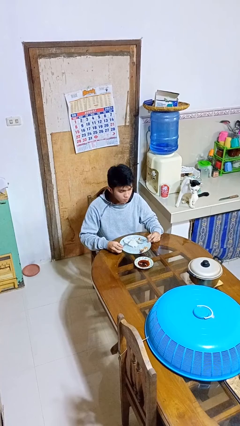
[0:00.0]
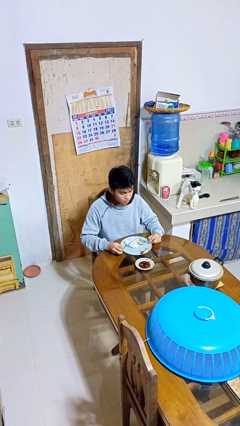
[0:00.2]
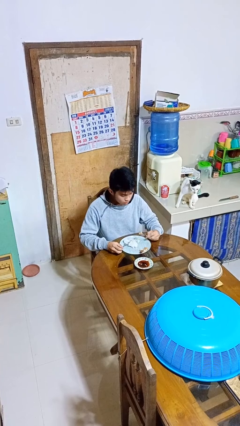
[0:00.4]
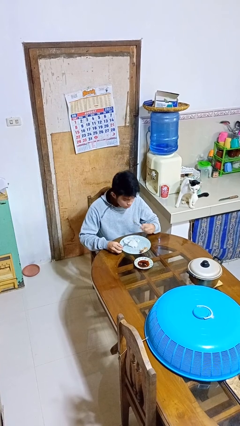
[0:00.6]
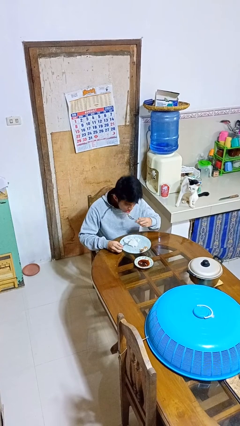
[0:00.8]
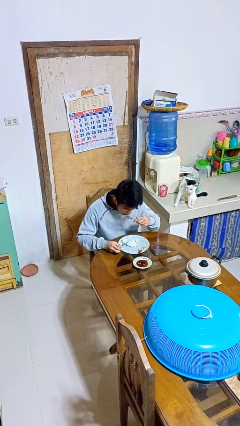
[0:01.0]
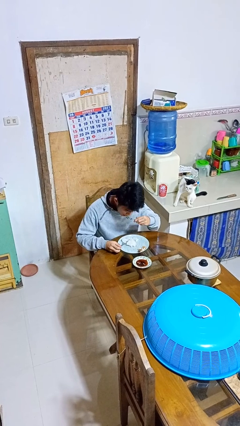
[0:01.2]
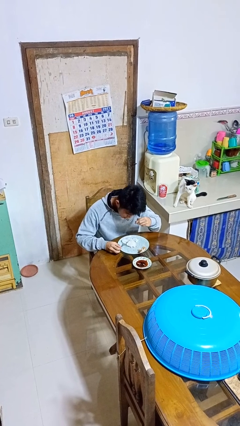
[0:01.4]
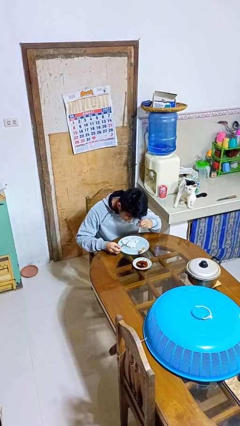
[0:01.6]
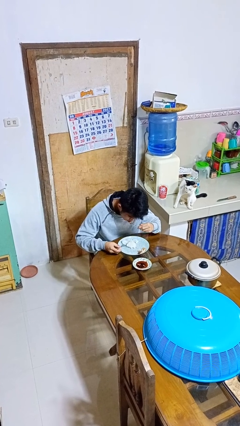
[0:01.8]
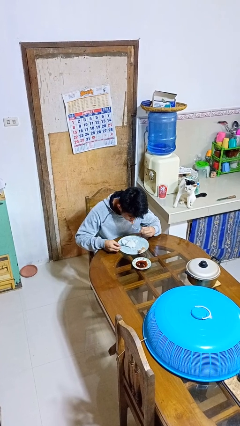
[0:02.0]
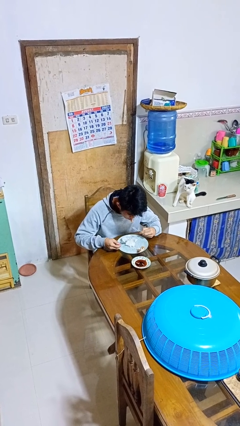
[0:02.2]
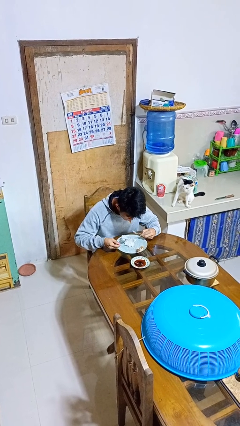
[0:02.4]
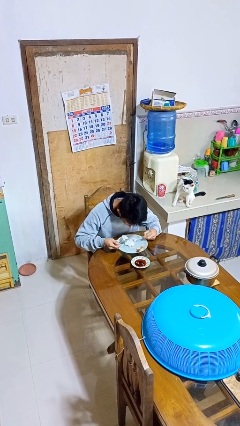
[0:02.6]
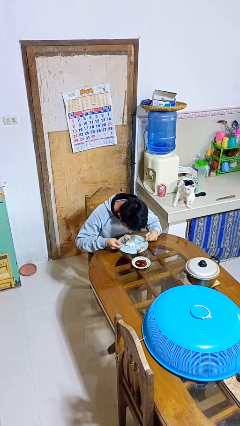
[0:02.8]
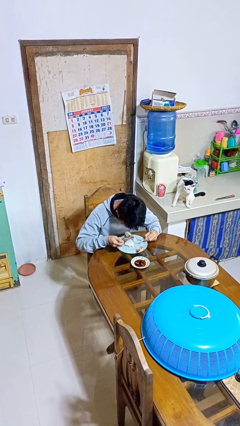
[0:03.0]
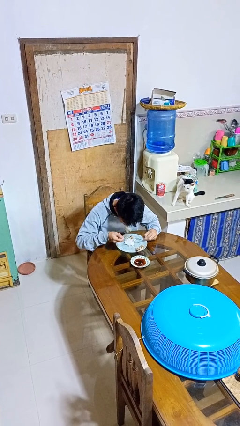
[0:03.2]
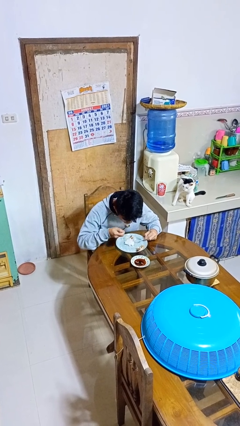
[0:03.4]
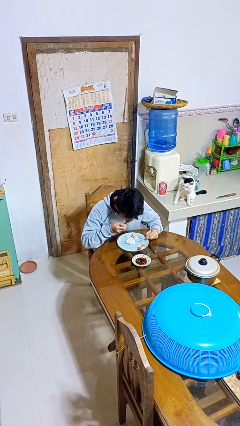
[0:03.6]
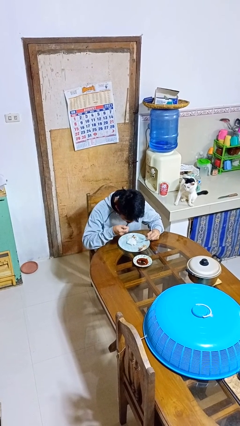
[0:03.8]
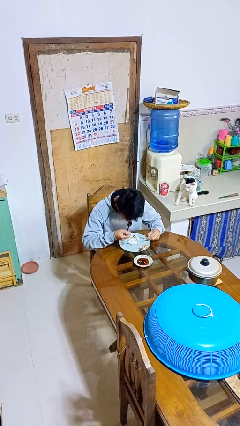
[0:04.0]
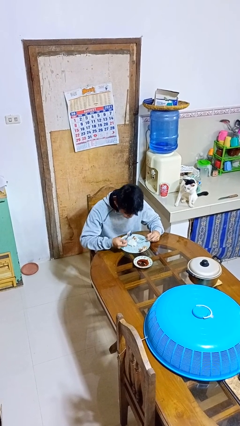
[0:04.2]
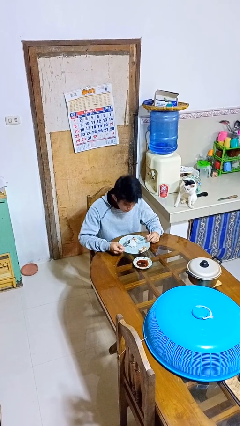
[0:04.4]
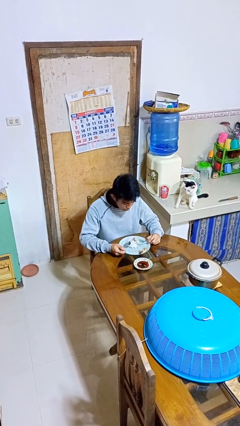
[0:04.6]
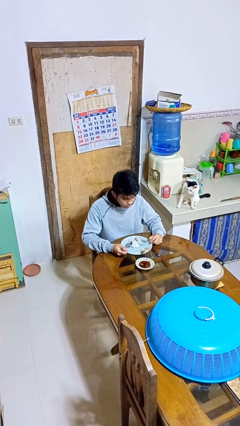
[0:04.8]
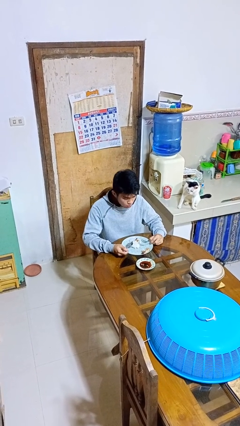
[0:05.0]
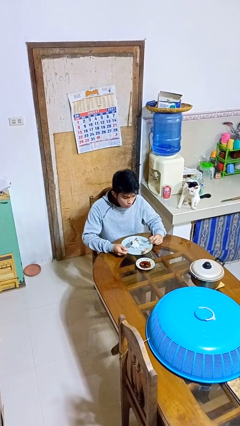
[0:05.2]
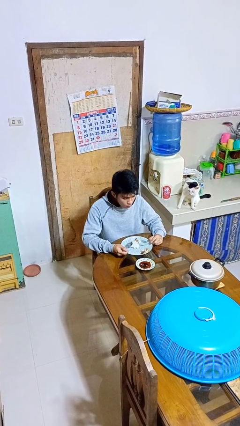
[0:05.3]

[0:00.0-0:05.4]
person eats with utensil

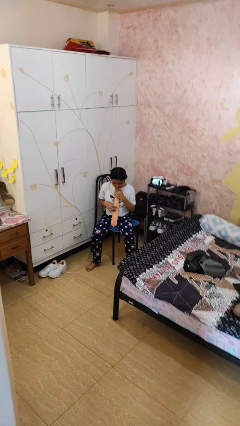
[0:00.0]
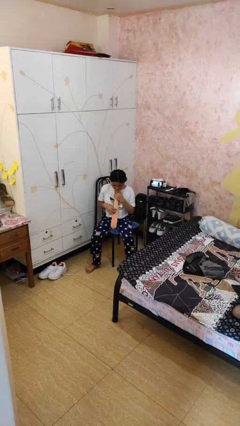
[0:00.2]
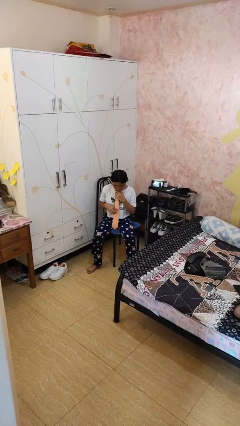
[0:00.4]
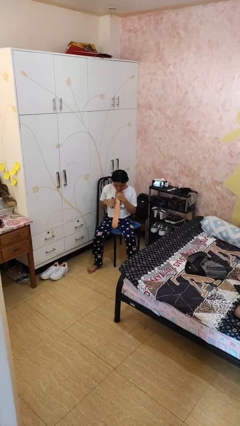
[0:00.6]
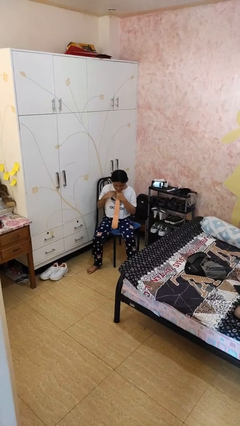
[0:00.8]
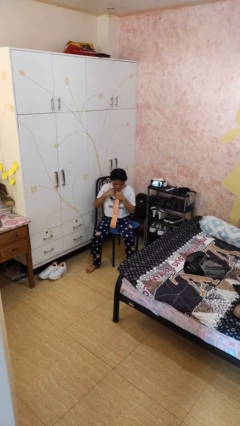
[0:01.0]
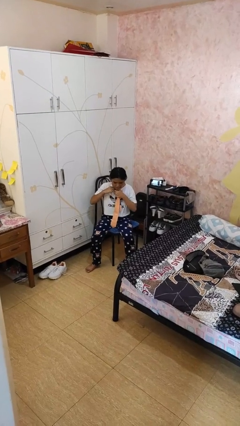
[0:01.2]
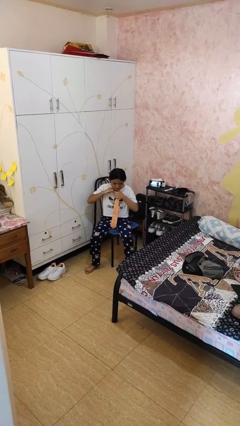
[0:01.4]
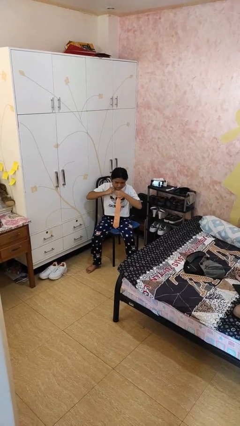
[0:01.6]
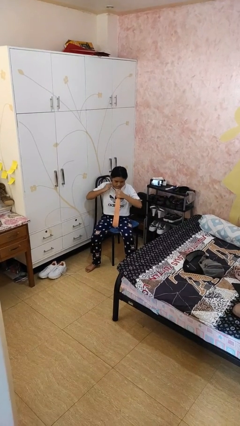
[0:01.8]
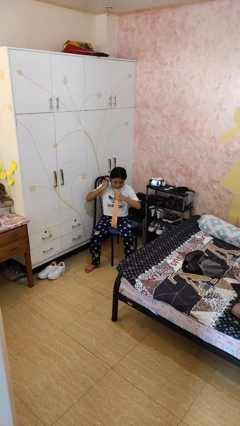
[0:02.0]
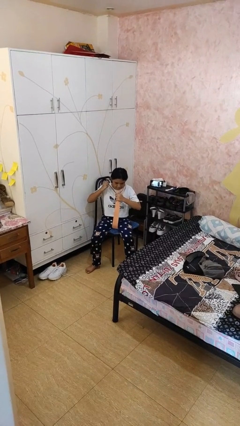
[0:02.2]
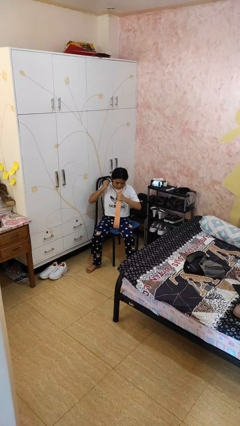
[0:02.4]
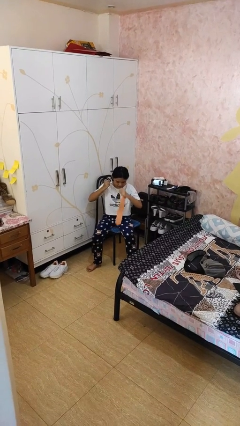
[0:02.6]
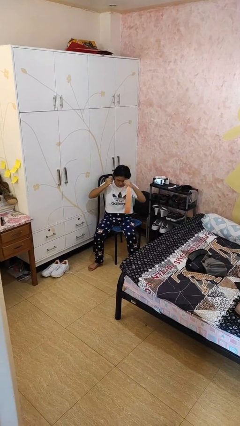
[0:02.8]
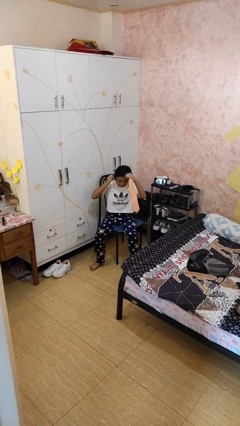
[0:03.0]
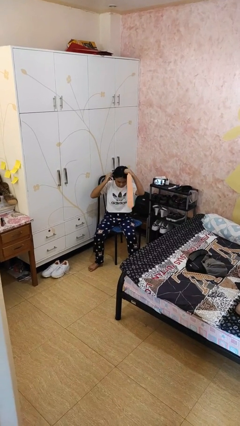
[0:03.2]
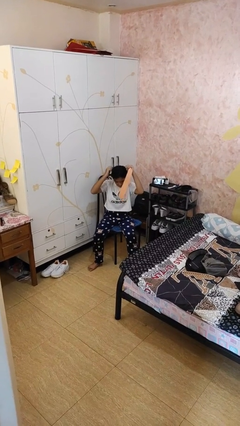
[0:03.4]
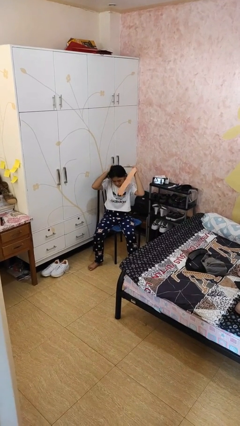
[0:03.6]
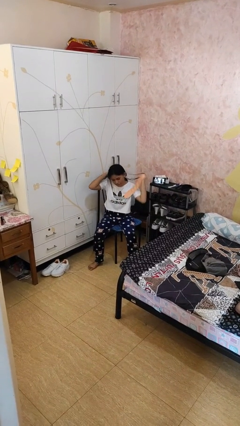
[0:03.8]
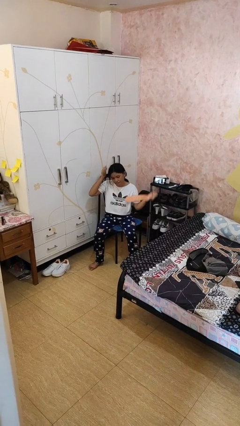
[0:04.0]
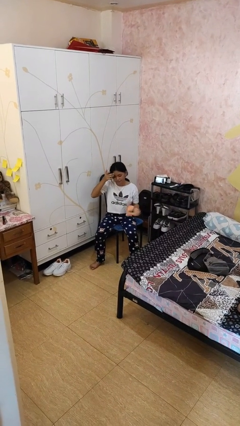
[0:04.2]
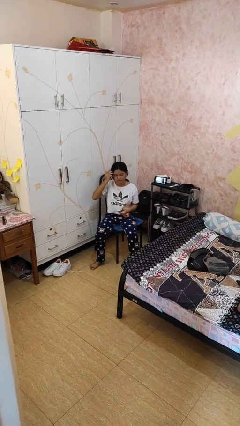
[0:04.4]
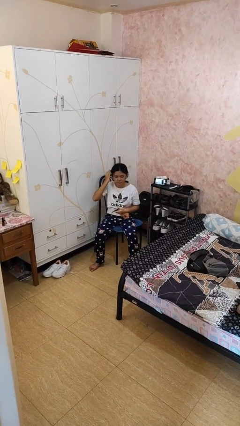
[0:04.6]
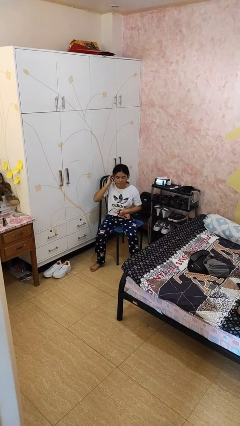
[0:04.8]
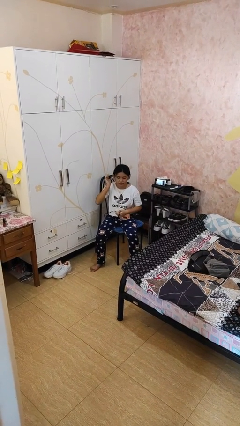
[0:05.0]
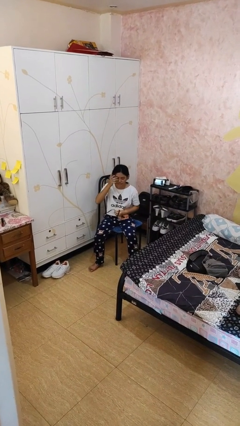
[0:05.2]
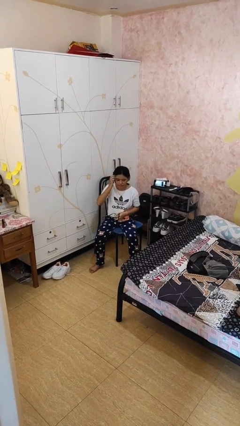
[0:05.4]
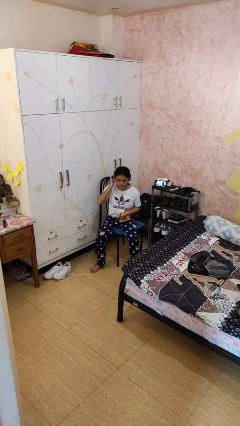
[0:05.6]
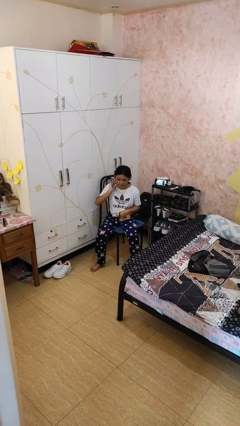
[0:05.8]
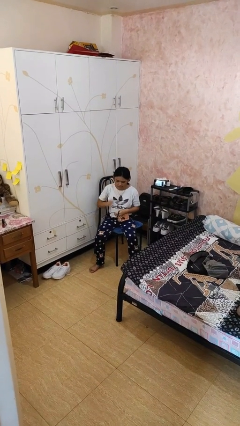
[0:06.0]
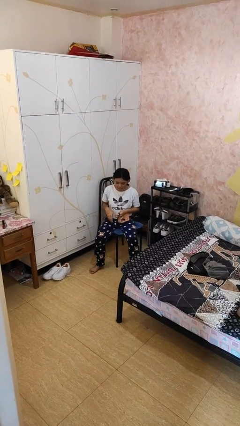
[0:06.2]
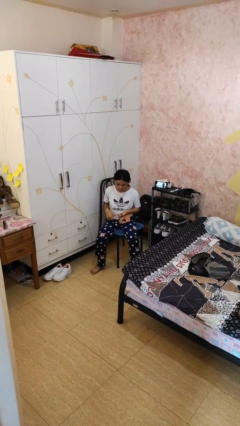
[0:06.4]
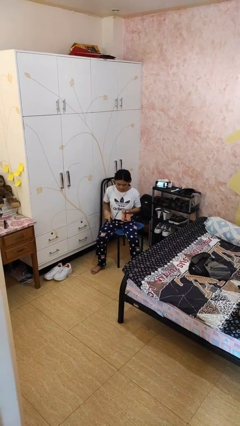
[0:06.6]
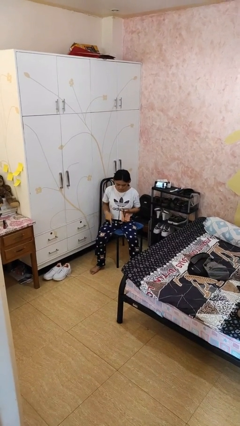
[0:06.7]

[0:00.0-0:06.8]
person takes off necktie

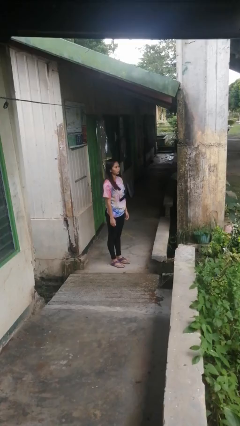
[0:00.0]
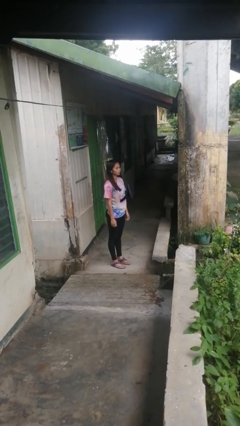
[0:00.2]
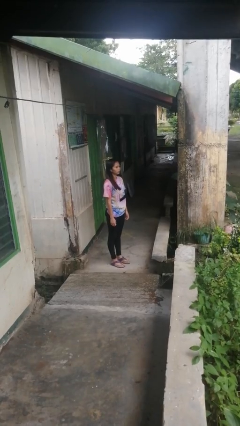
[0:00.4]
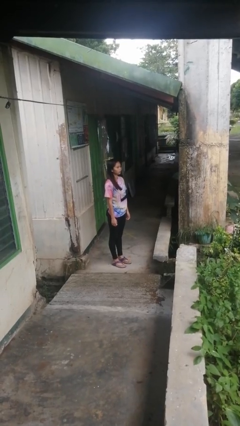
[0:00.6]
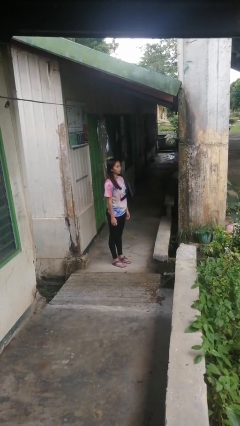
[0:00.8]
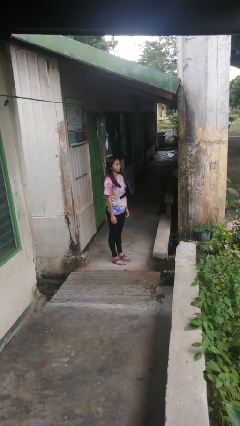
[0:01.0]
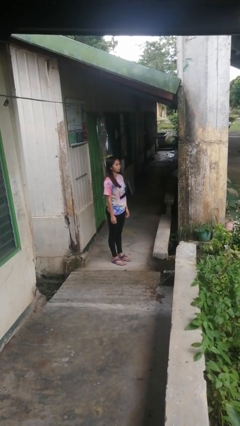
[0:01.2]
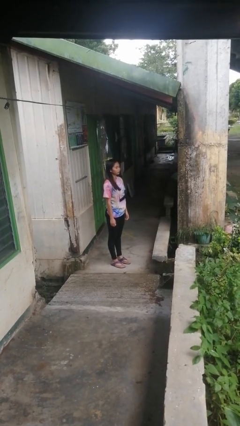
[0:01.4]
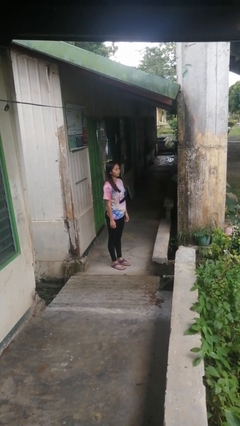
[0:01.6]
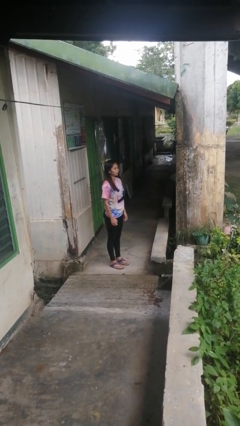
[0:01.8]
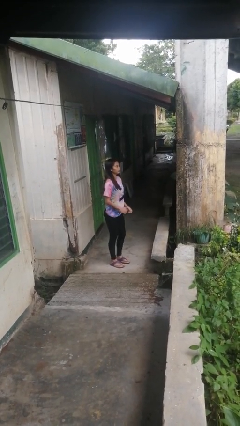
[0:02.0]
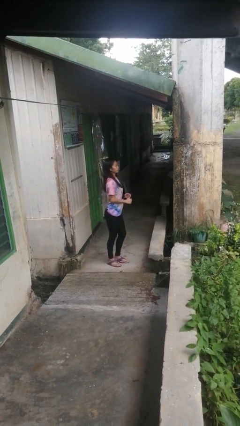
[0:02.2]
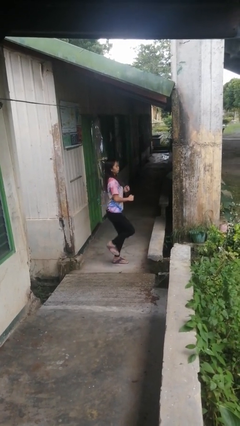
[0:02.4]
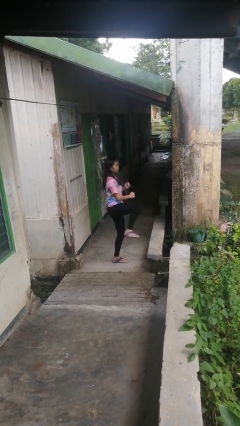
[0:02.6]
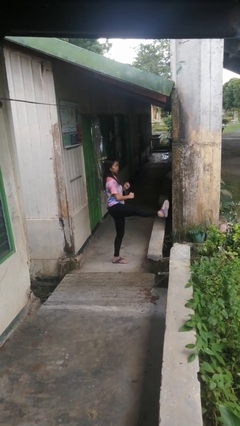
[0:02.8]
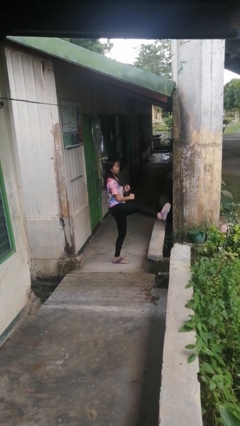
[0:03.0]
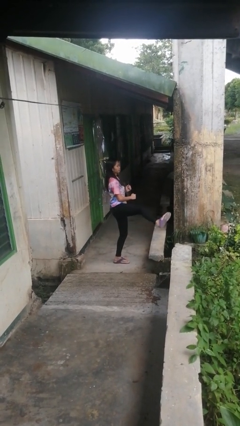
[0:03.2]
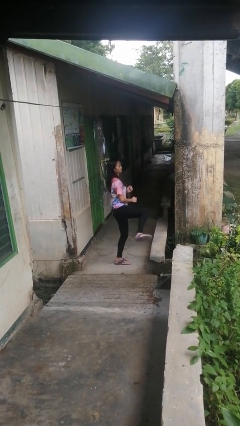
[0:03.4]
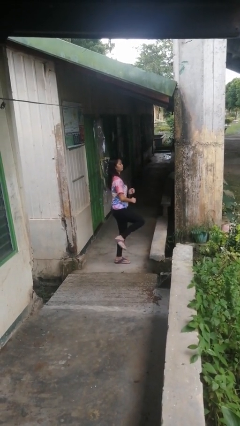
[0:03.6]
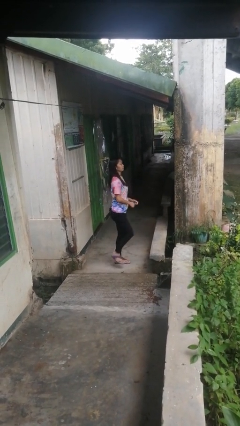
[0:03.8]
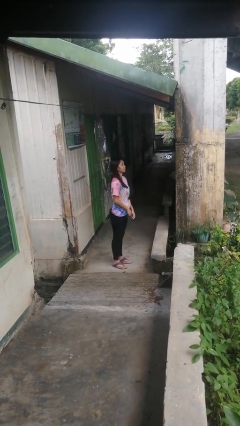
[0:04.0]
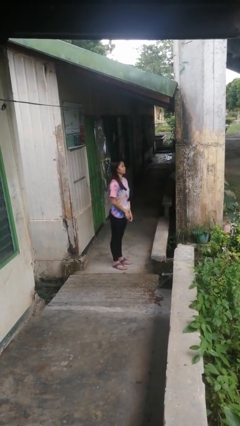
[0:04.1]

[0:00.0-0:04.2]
person karate kicks

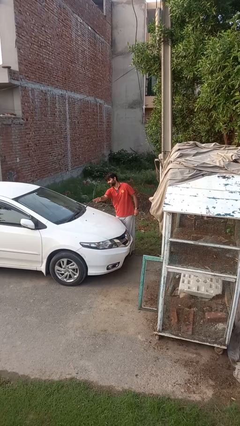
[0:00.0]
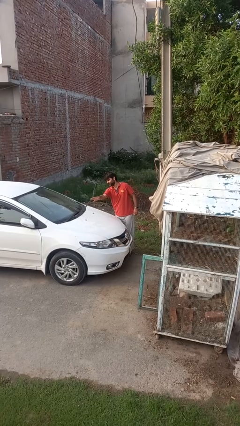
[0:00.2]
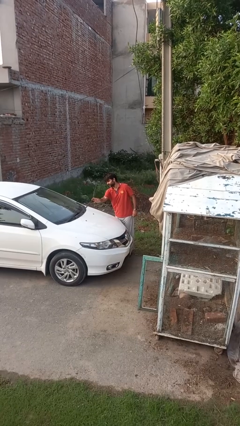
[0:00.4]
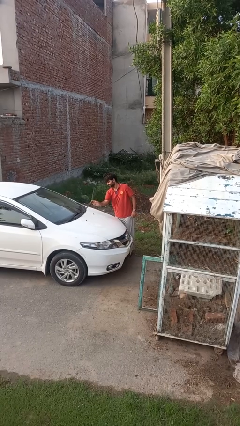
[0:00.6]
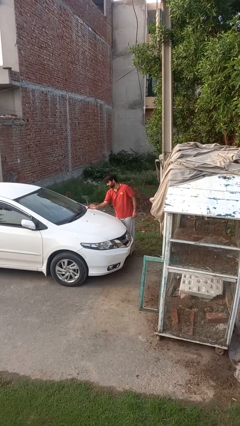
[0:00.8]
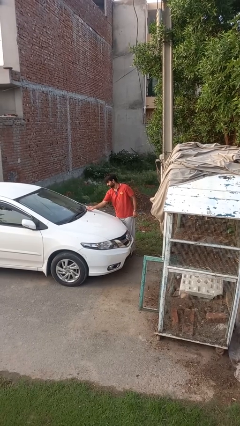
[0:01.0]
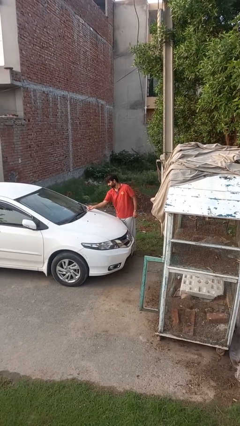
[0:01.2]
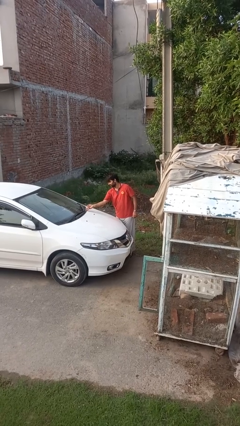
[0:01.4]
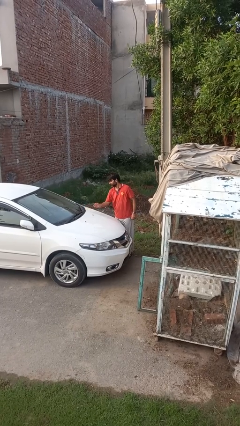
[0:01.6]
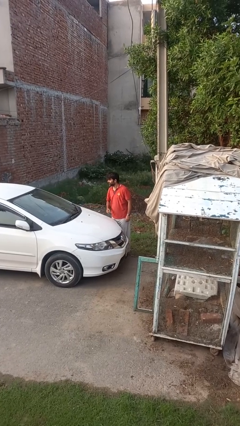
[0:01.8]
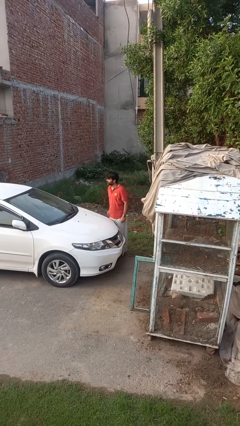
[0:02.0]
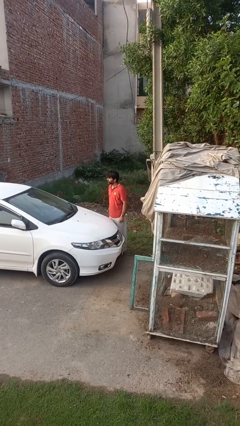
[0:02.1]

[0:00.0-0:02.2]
person flips down car wipers
